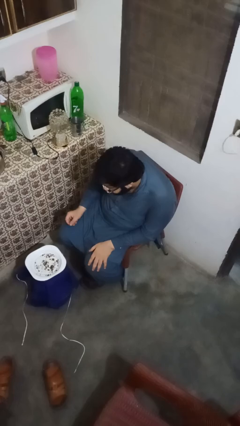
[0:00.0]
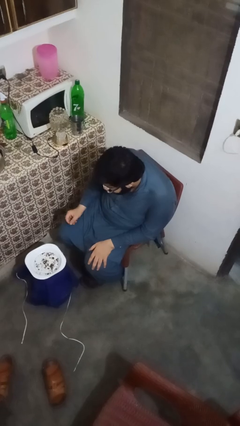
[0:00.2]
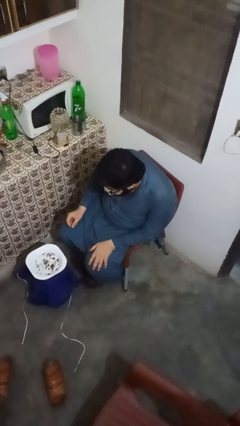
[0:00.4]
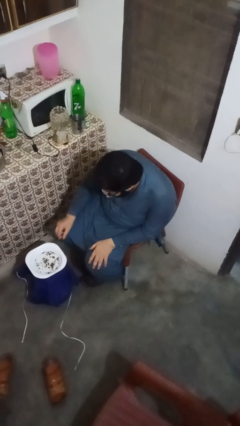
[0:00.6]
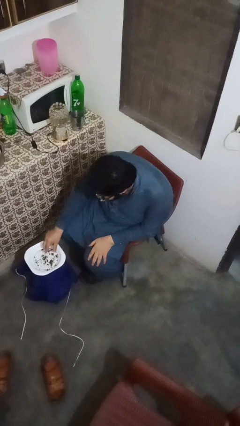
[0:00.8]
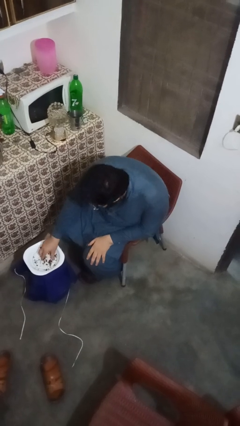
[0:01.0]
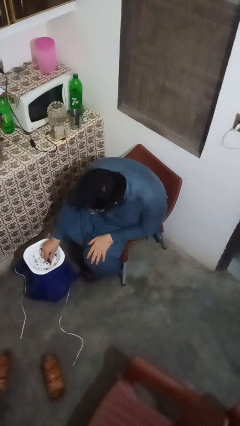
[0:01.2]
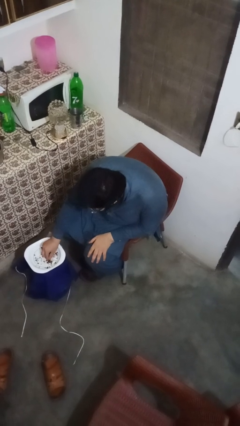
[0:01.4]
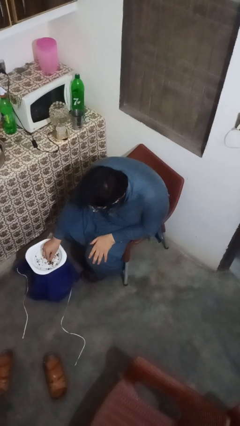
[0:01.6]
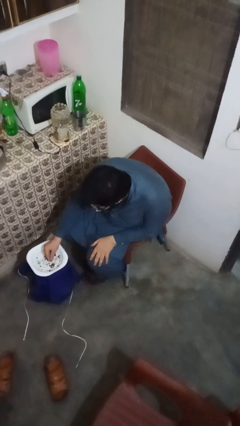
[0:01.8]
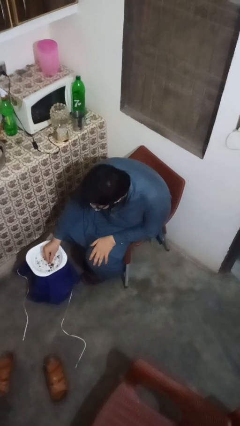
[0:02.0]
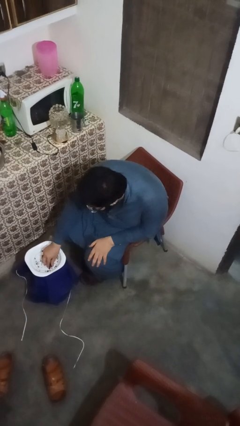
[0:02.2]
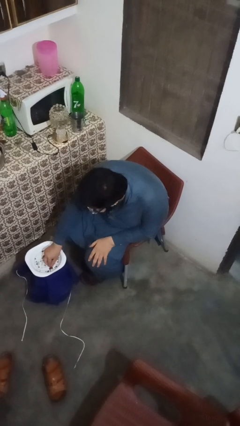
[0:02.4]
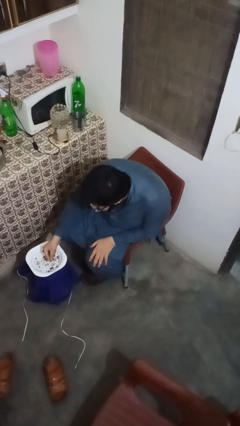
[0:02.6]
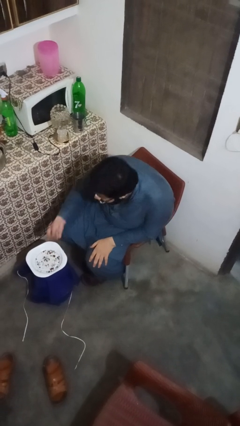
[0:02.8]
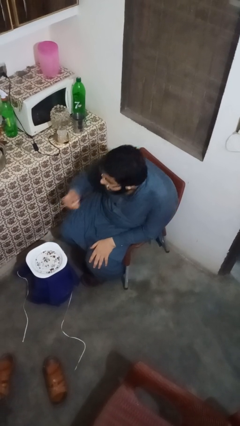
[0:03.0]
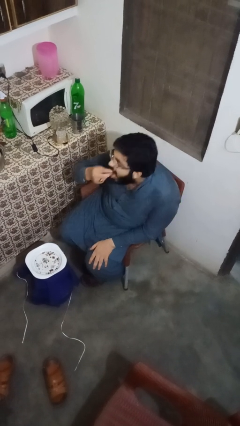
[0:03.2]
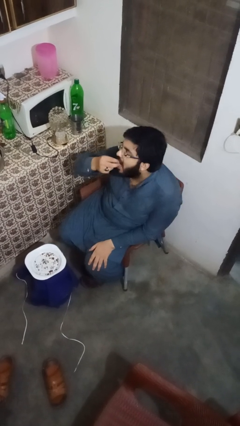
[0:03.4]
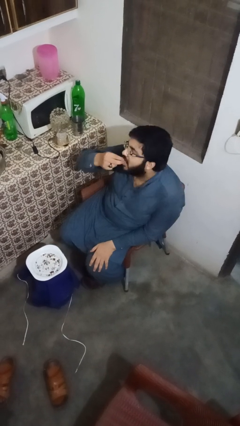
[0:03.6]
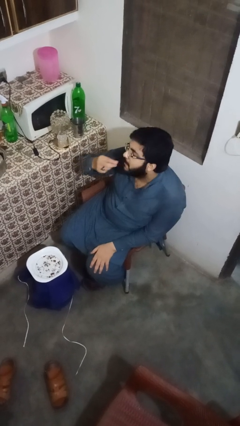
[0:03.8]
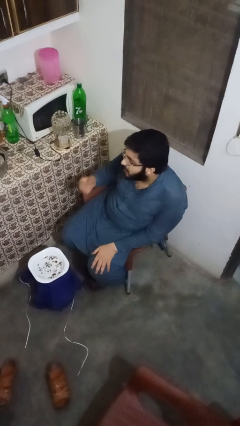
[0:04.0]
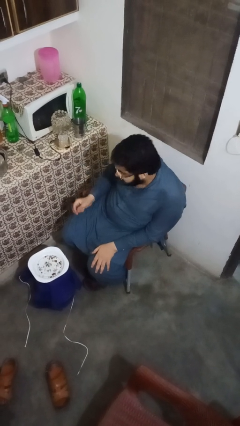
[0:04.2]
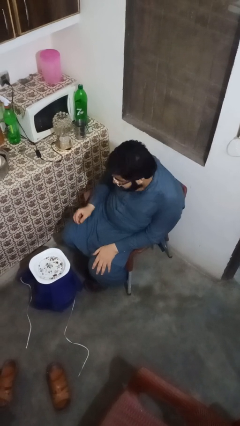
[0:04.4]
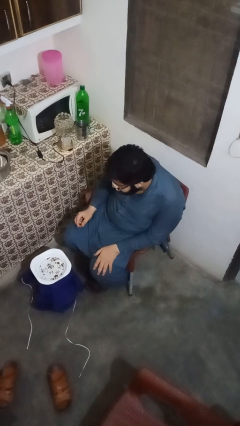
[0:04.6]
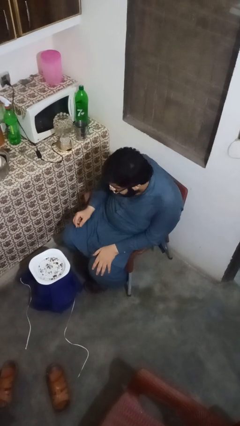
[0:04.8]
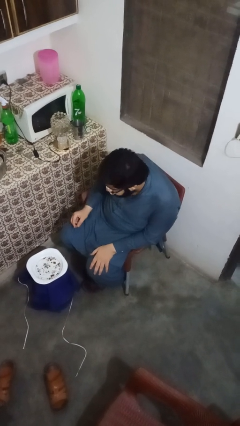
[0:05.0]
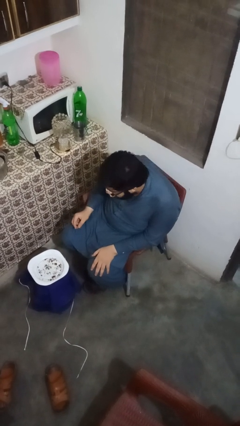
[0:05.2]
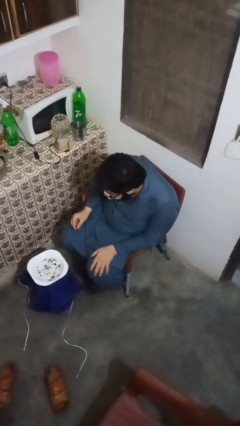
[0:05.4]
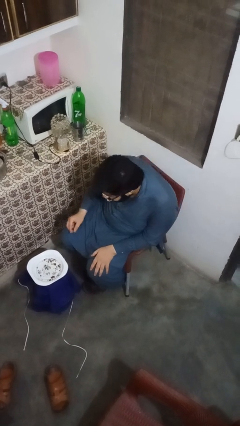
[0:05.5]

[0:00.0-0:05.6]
person eats with hands

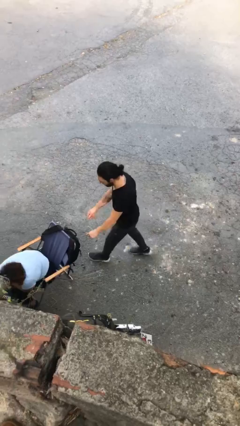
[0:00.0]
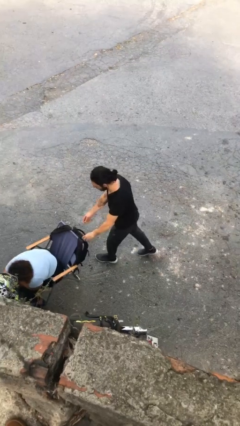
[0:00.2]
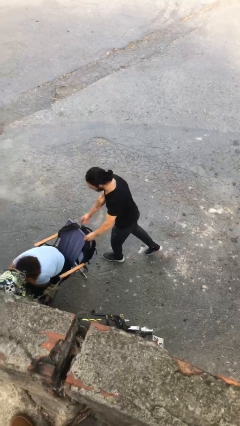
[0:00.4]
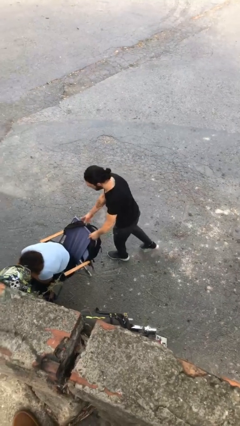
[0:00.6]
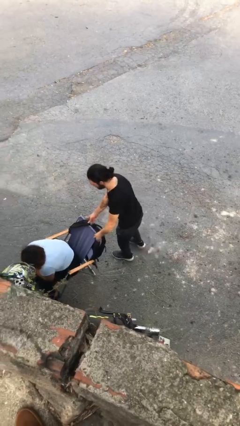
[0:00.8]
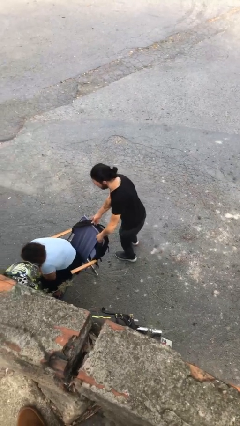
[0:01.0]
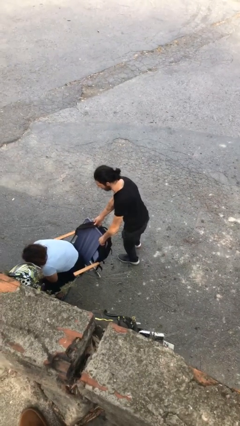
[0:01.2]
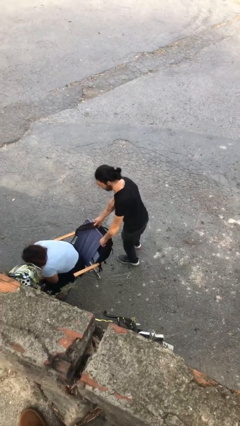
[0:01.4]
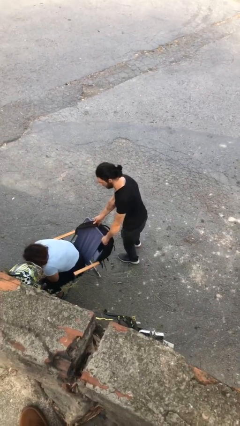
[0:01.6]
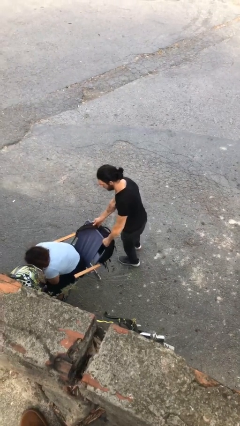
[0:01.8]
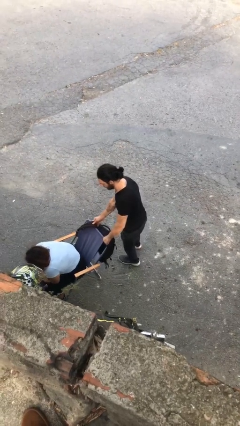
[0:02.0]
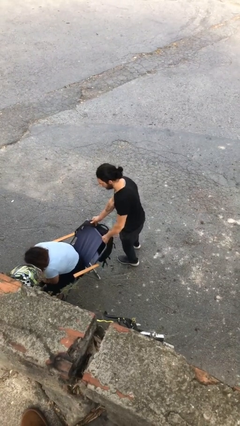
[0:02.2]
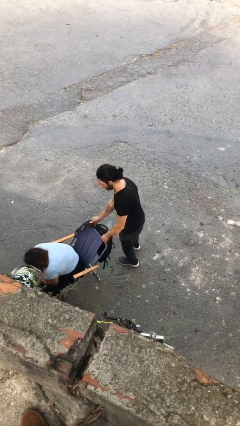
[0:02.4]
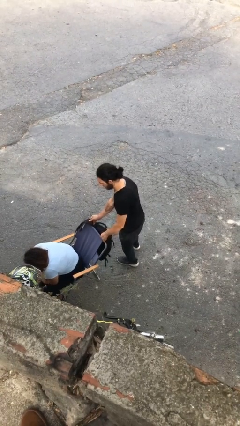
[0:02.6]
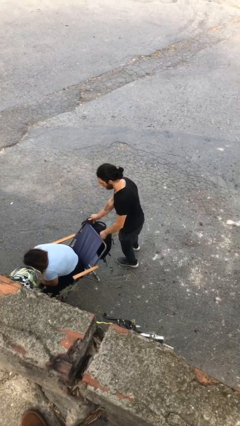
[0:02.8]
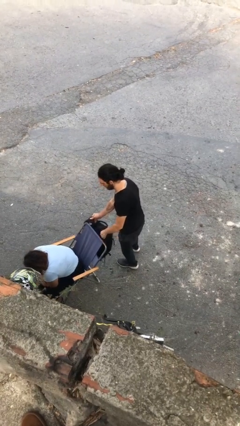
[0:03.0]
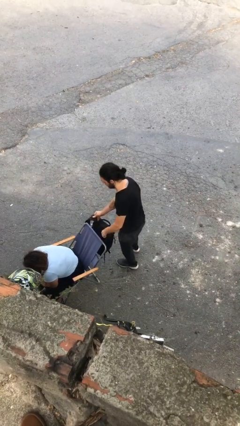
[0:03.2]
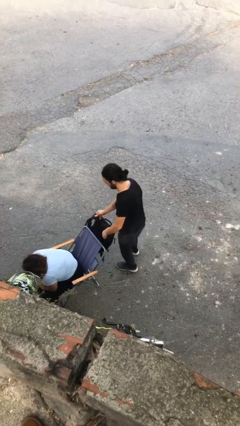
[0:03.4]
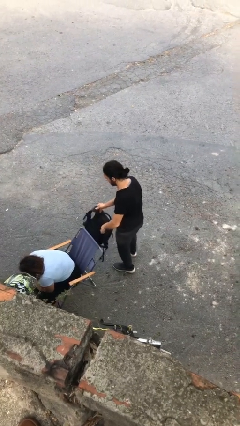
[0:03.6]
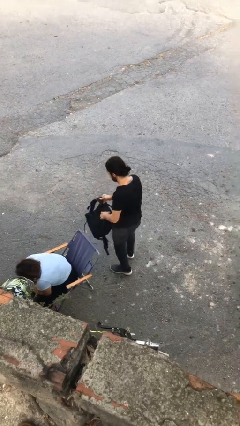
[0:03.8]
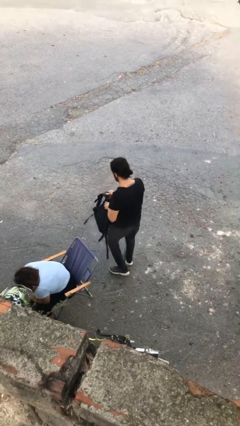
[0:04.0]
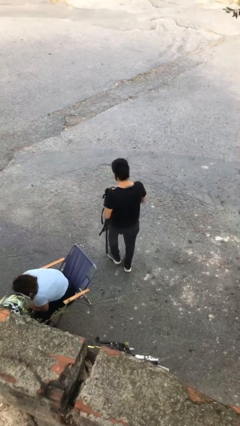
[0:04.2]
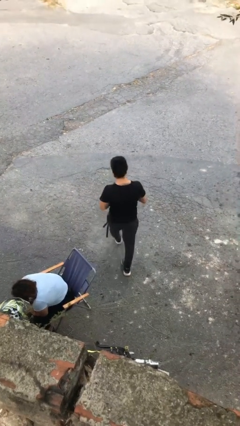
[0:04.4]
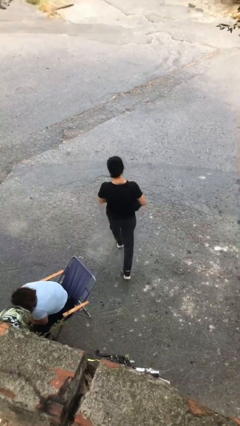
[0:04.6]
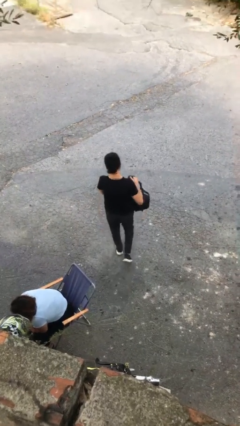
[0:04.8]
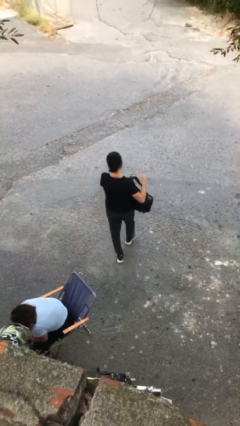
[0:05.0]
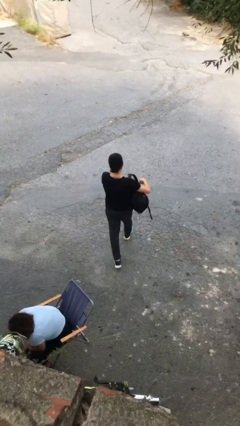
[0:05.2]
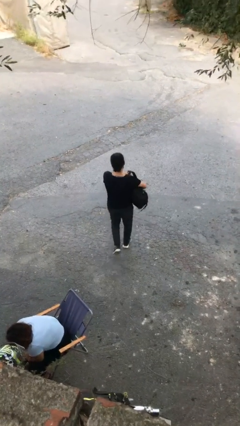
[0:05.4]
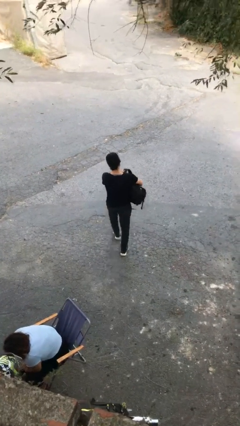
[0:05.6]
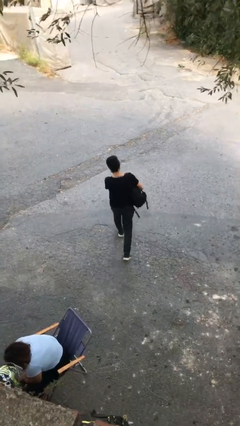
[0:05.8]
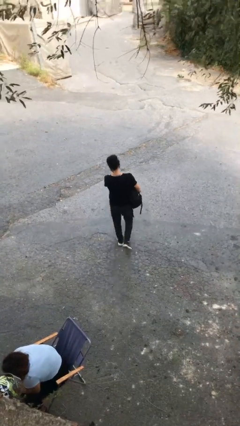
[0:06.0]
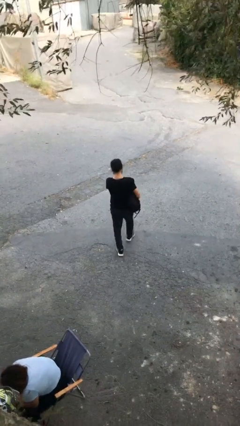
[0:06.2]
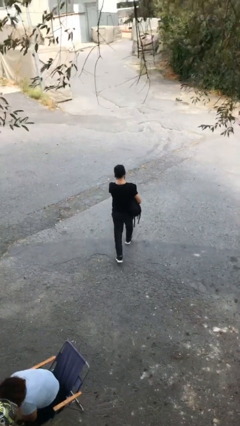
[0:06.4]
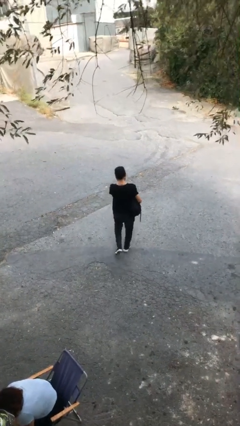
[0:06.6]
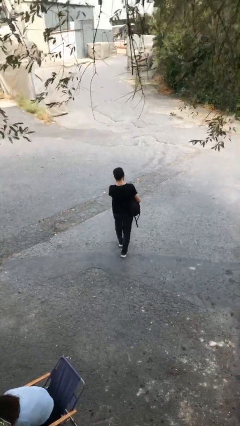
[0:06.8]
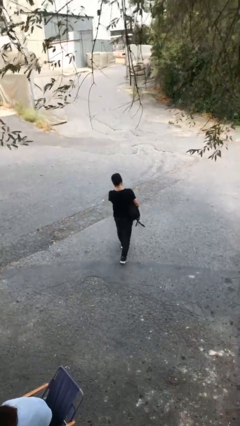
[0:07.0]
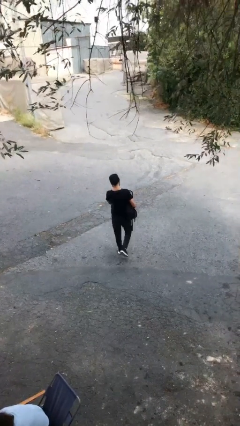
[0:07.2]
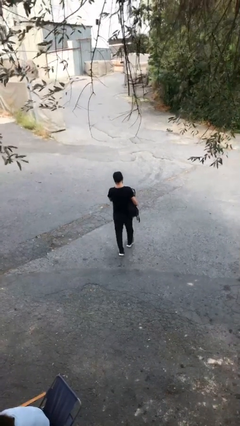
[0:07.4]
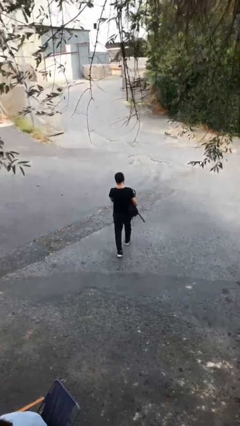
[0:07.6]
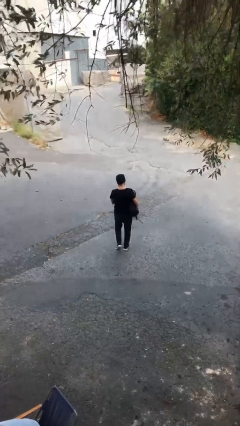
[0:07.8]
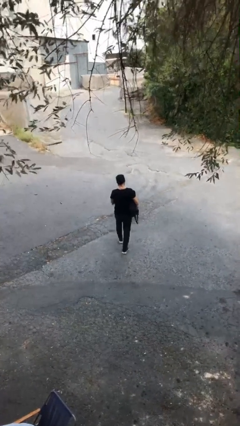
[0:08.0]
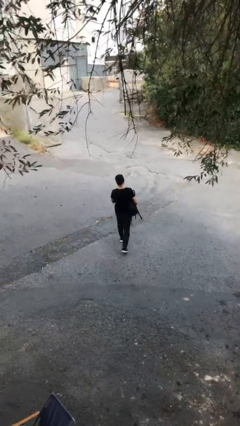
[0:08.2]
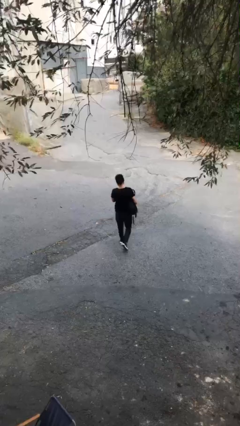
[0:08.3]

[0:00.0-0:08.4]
person steals object from person

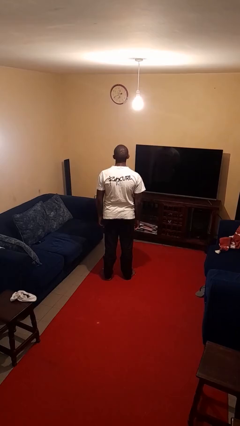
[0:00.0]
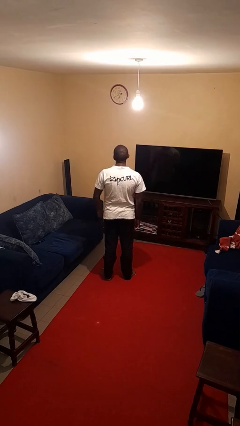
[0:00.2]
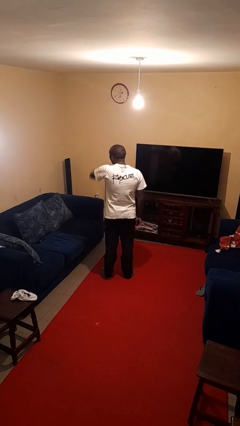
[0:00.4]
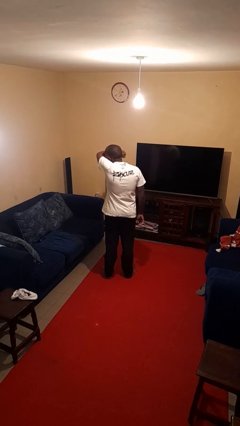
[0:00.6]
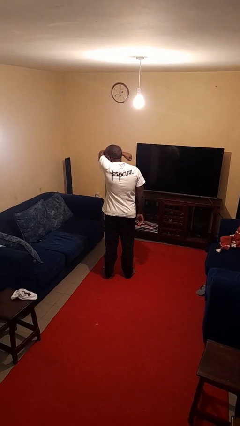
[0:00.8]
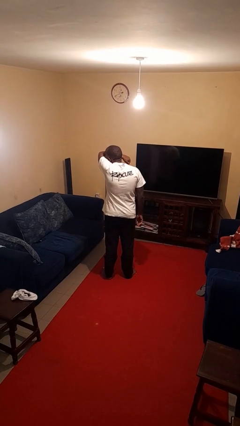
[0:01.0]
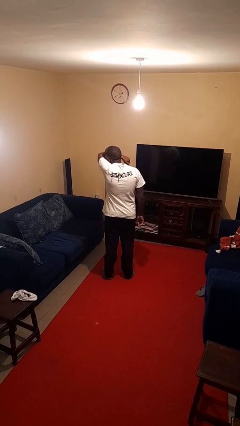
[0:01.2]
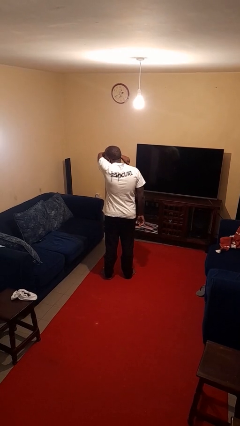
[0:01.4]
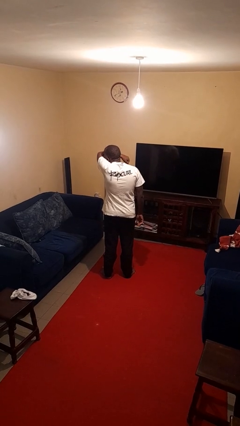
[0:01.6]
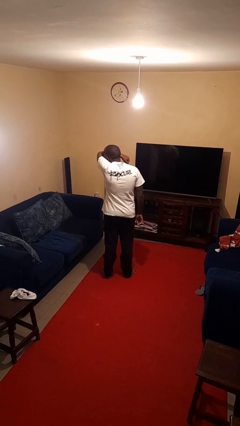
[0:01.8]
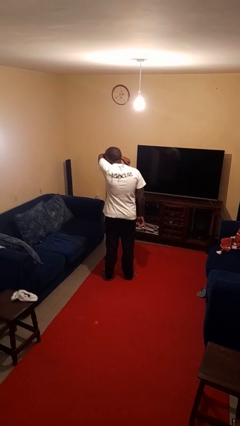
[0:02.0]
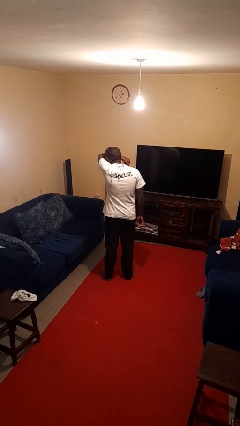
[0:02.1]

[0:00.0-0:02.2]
person sneezes into arm

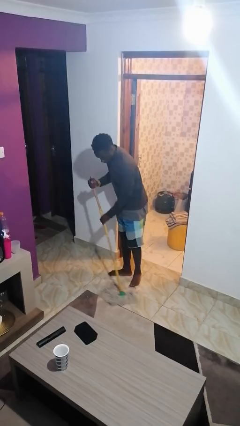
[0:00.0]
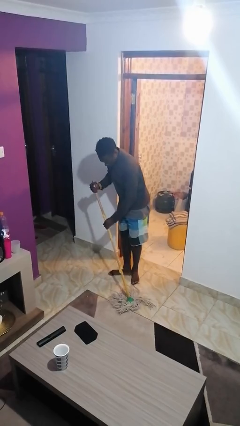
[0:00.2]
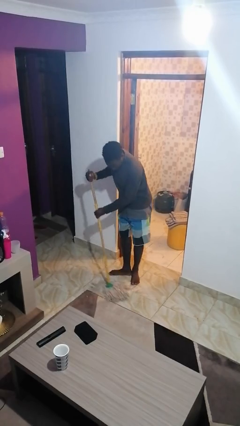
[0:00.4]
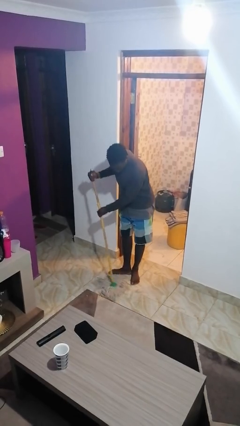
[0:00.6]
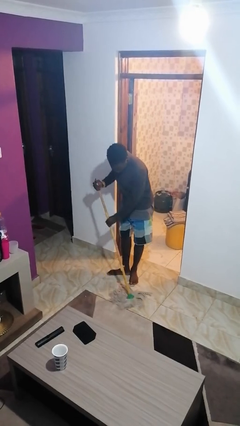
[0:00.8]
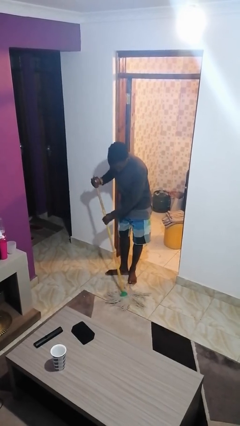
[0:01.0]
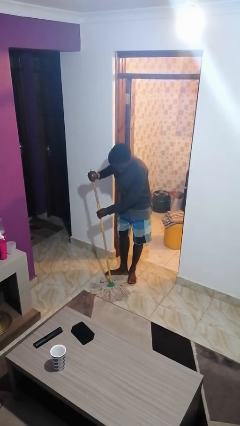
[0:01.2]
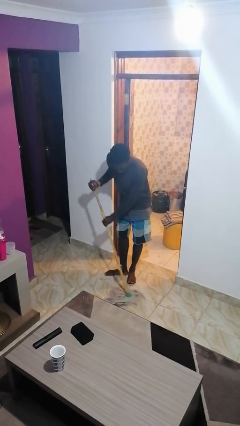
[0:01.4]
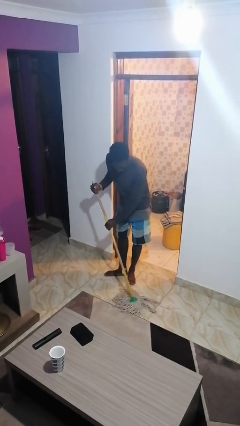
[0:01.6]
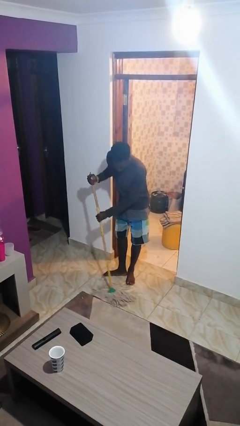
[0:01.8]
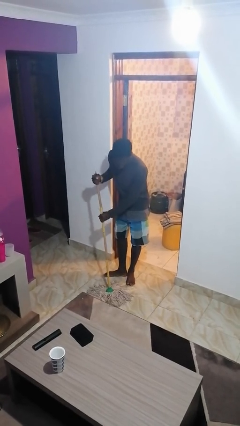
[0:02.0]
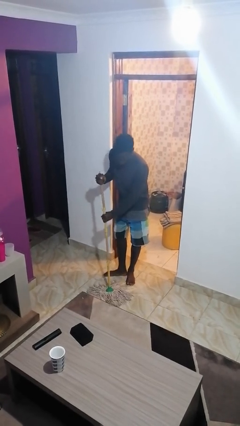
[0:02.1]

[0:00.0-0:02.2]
person mops
